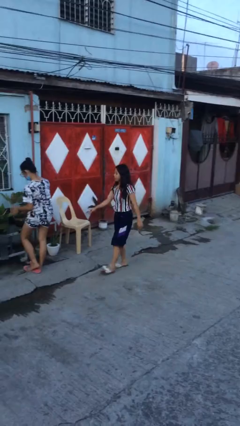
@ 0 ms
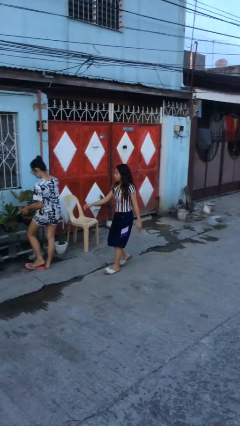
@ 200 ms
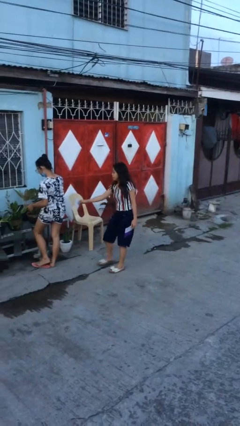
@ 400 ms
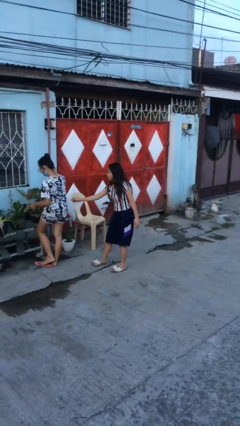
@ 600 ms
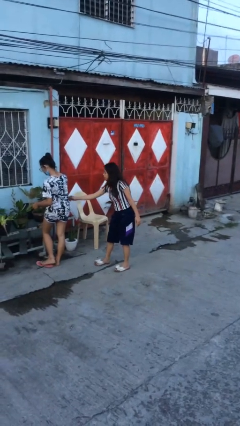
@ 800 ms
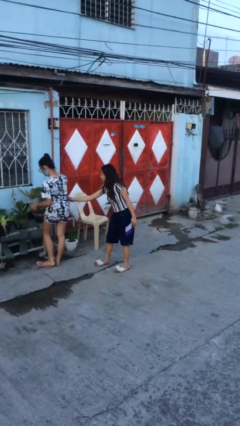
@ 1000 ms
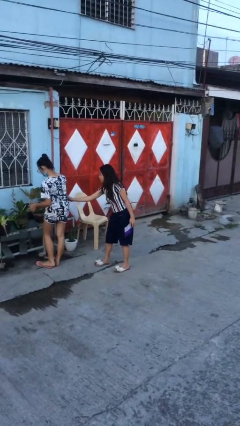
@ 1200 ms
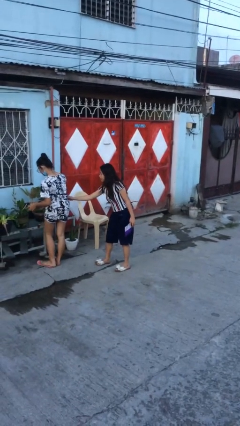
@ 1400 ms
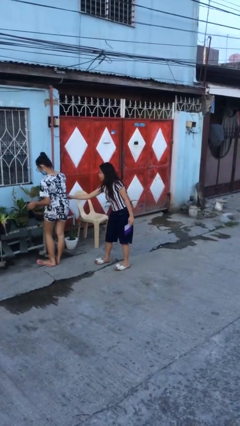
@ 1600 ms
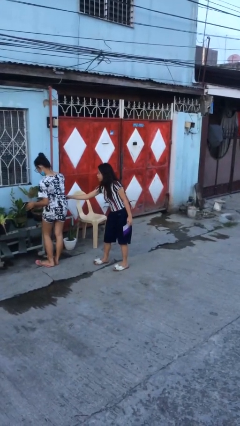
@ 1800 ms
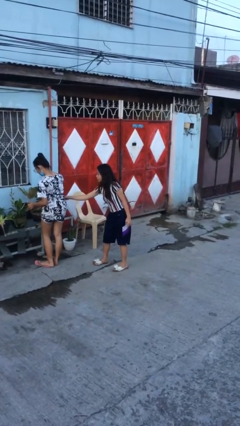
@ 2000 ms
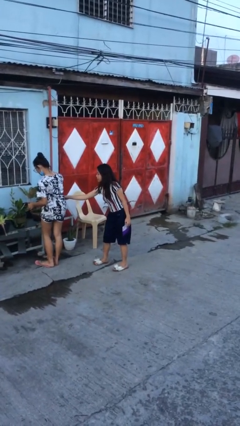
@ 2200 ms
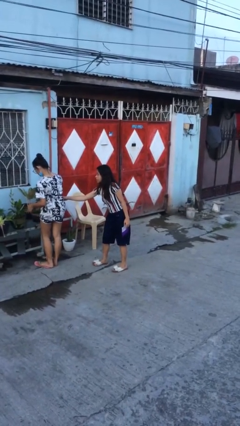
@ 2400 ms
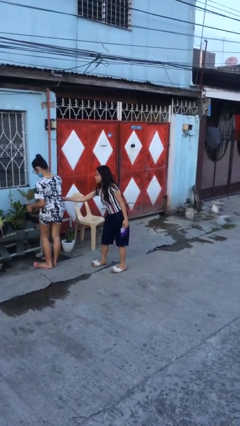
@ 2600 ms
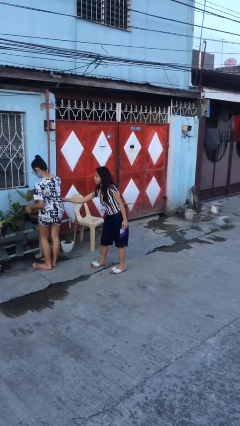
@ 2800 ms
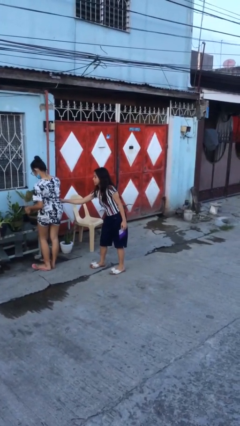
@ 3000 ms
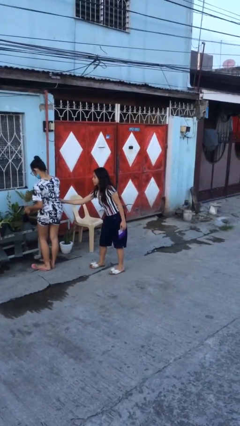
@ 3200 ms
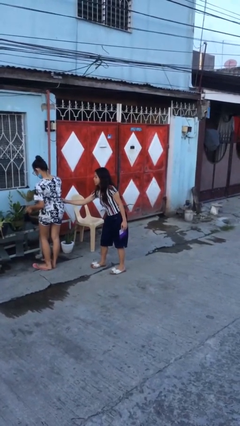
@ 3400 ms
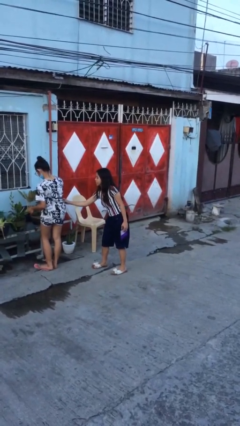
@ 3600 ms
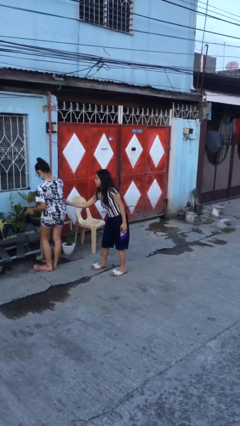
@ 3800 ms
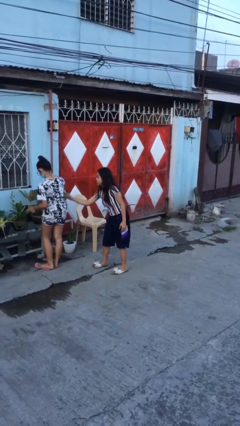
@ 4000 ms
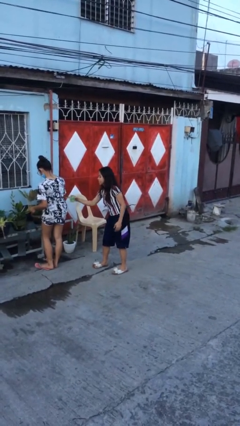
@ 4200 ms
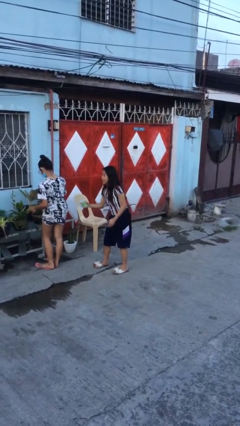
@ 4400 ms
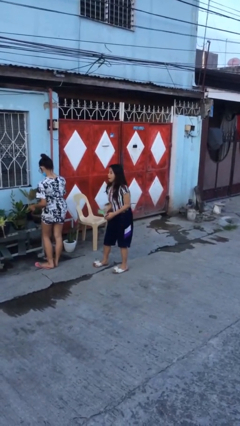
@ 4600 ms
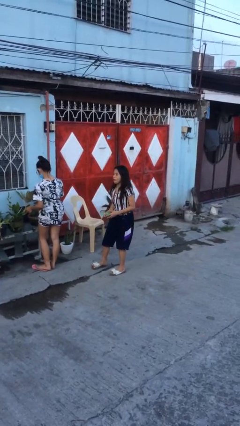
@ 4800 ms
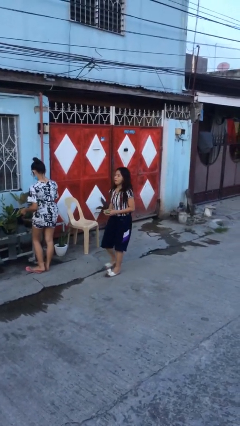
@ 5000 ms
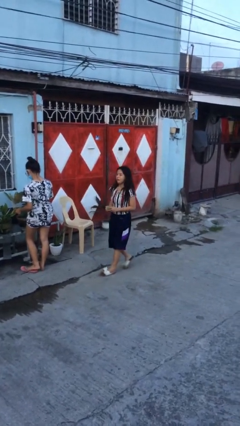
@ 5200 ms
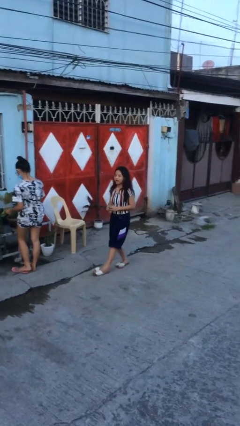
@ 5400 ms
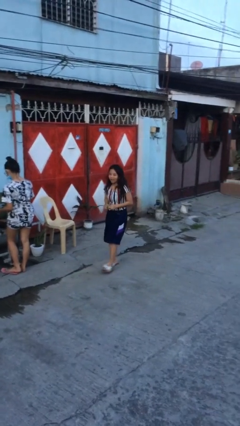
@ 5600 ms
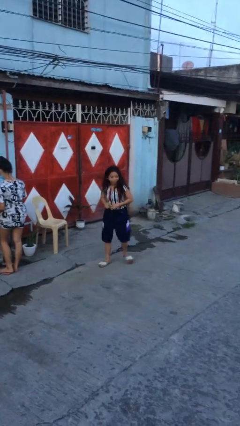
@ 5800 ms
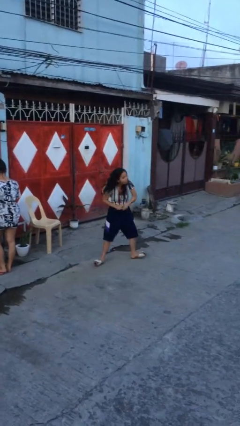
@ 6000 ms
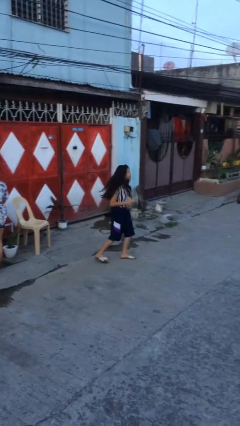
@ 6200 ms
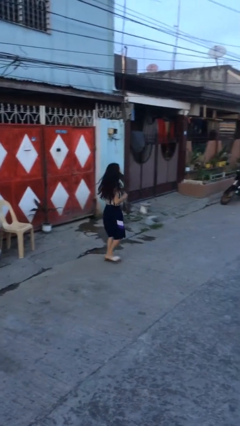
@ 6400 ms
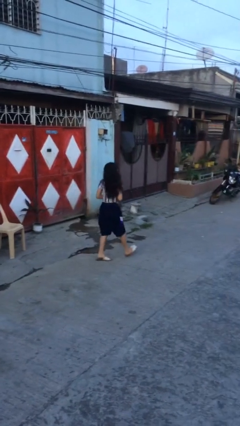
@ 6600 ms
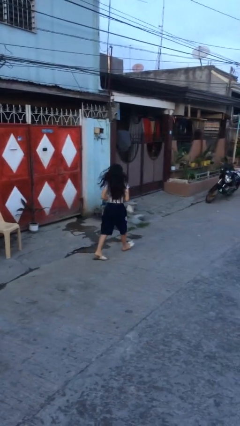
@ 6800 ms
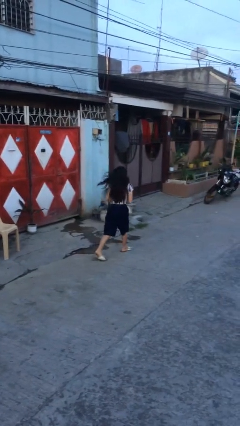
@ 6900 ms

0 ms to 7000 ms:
person steals object from person

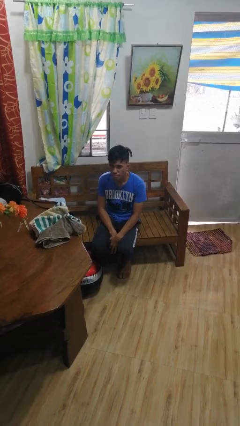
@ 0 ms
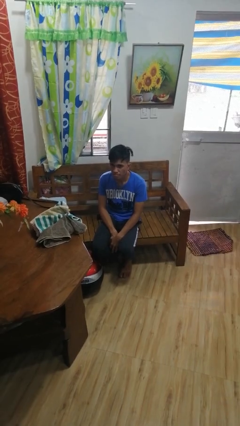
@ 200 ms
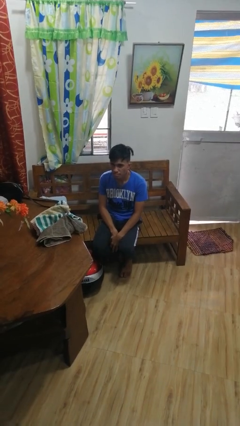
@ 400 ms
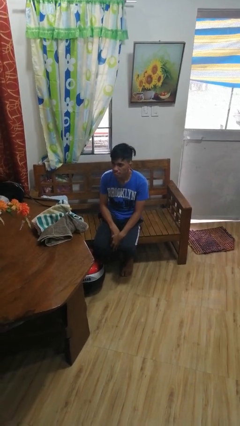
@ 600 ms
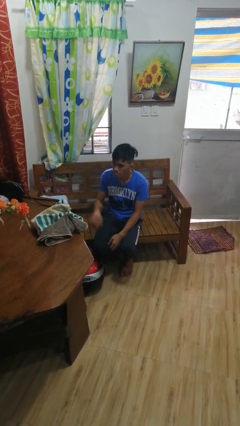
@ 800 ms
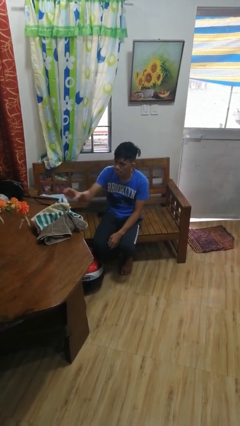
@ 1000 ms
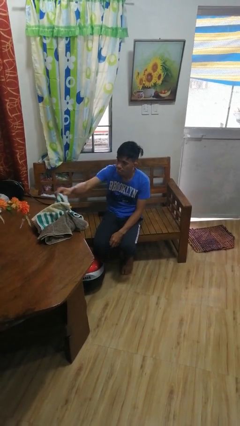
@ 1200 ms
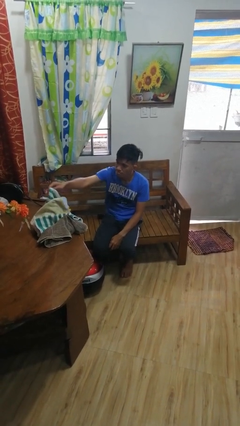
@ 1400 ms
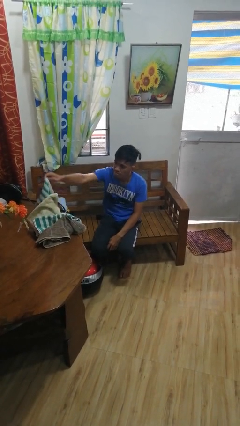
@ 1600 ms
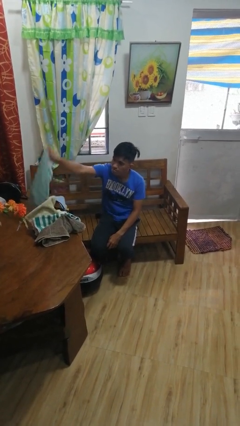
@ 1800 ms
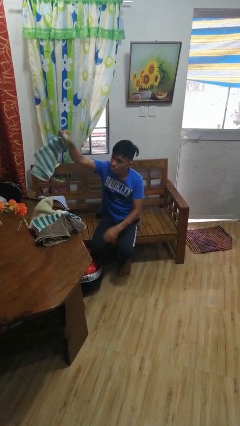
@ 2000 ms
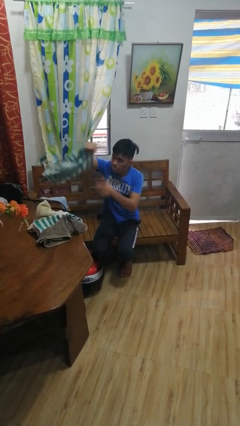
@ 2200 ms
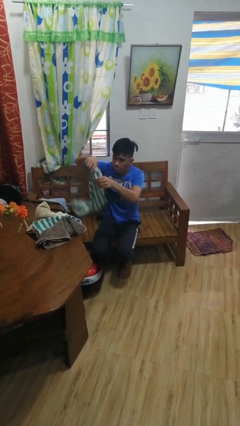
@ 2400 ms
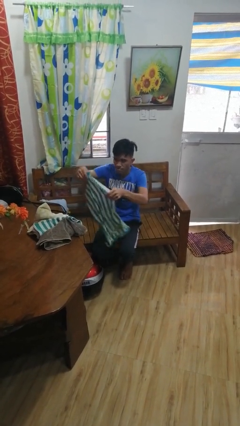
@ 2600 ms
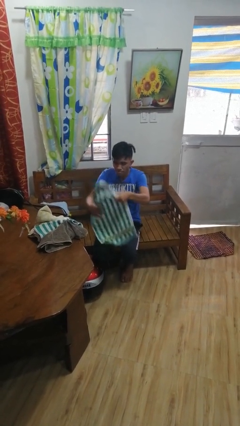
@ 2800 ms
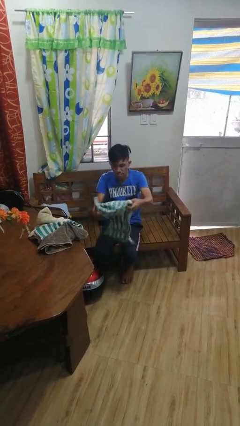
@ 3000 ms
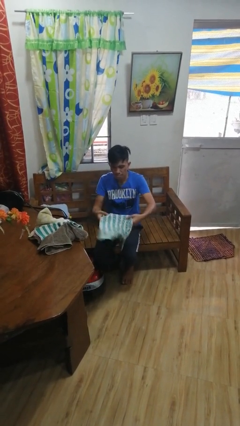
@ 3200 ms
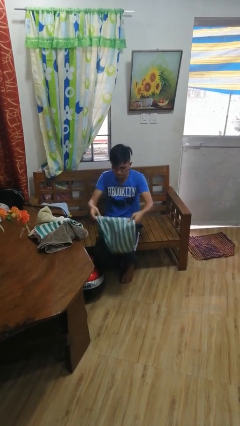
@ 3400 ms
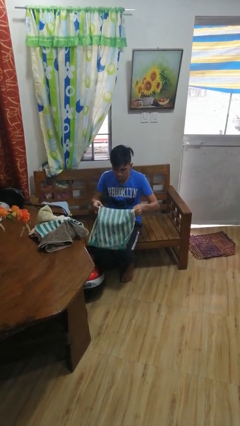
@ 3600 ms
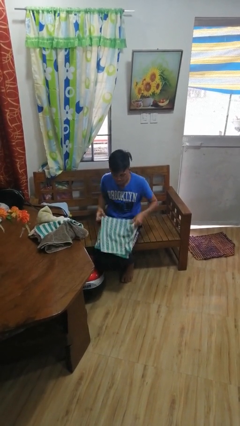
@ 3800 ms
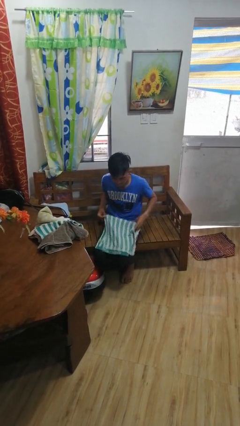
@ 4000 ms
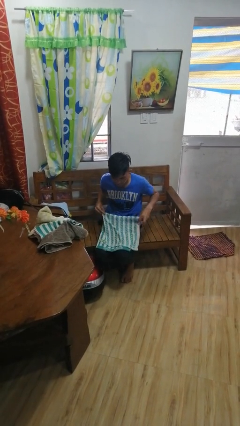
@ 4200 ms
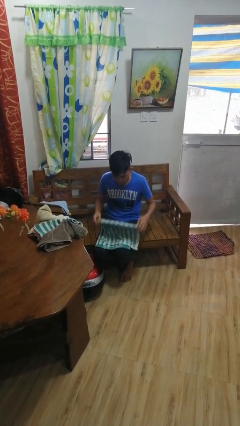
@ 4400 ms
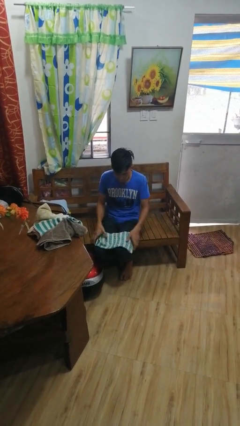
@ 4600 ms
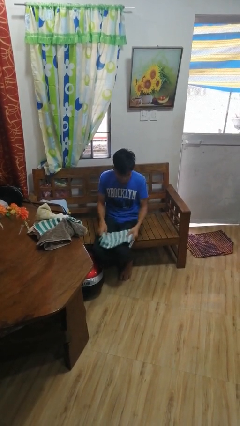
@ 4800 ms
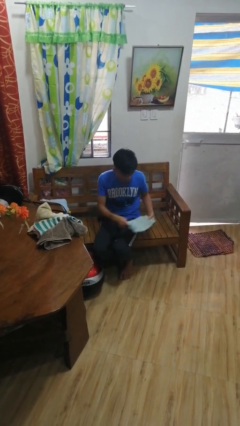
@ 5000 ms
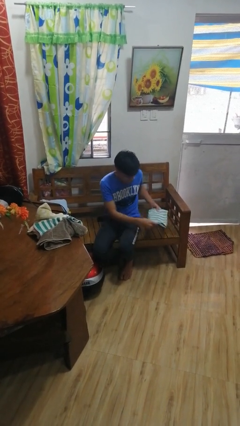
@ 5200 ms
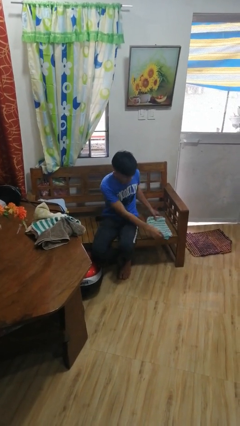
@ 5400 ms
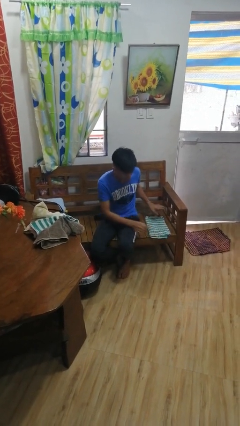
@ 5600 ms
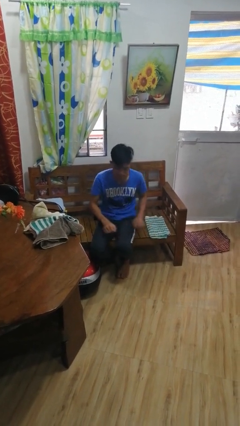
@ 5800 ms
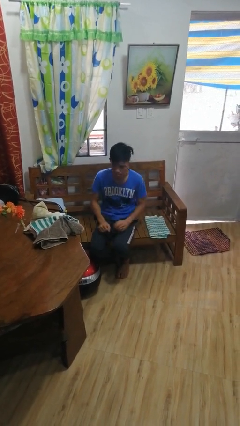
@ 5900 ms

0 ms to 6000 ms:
person folds towel

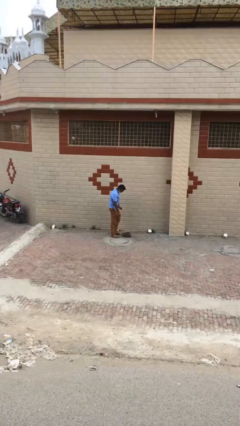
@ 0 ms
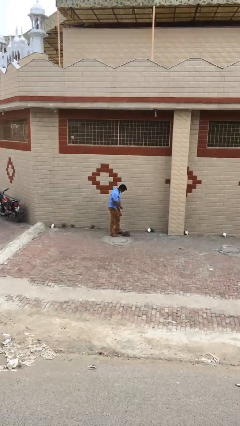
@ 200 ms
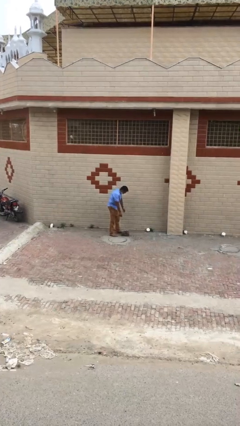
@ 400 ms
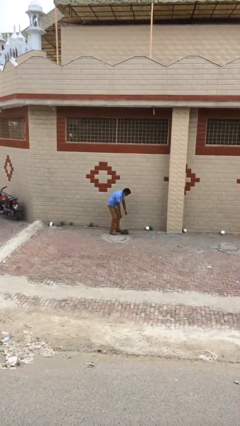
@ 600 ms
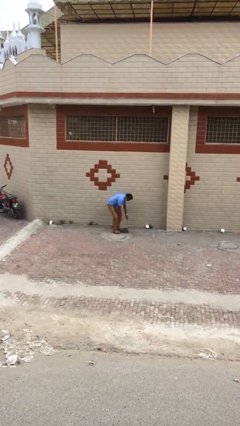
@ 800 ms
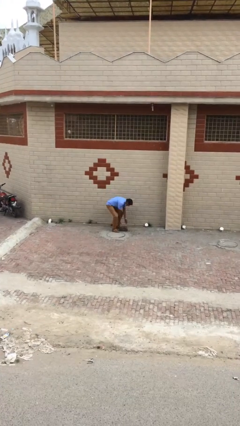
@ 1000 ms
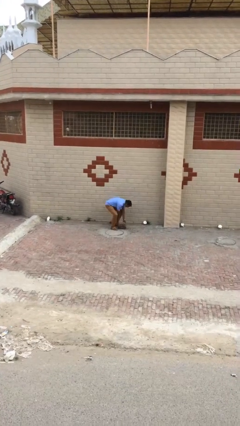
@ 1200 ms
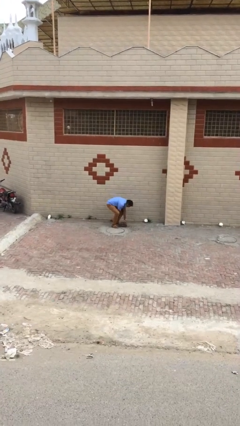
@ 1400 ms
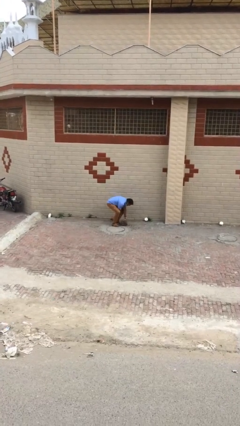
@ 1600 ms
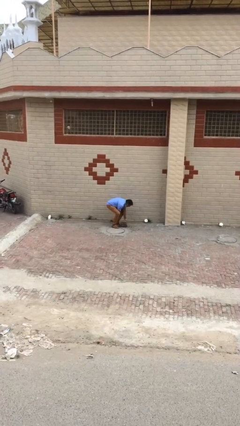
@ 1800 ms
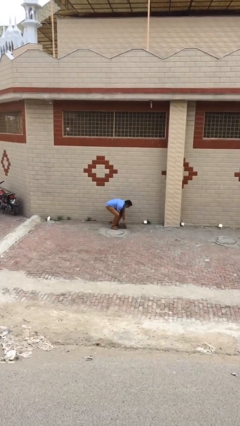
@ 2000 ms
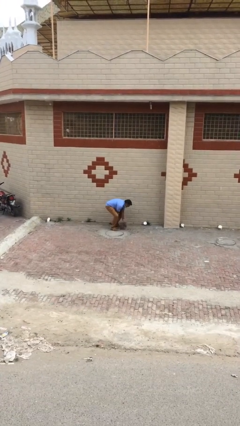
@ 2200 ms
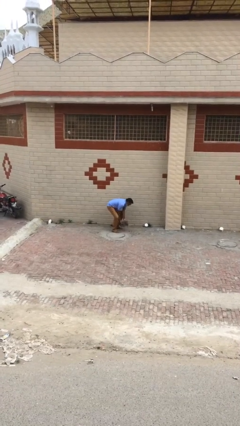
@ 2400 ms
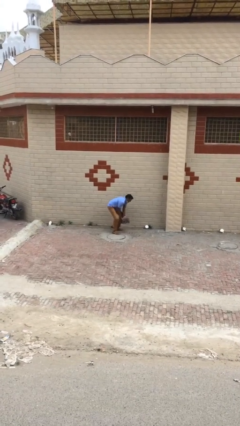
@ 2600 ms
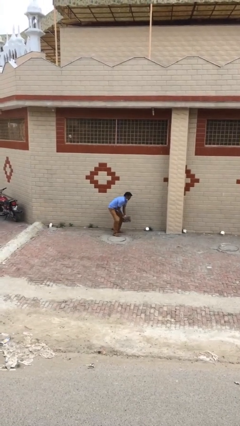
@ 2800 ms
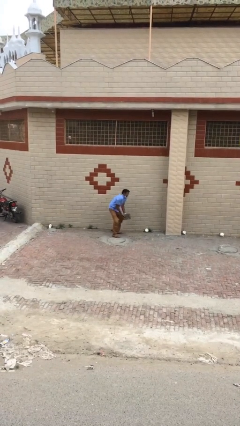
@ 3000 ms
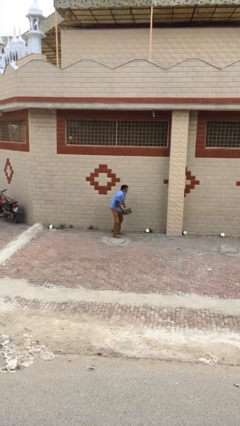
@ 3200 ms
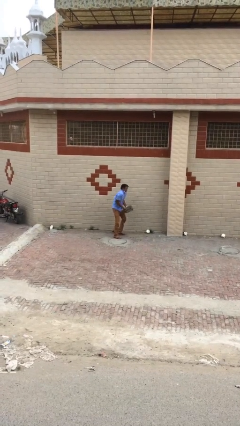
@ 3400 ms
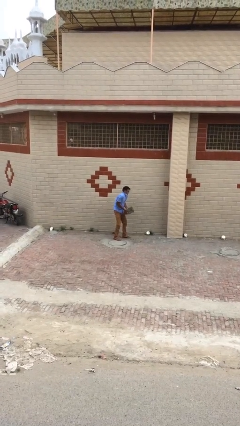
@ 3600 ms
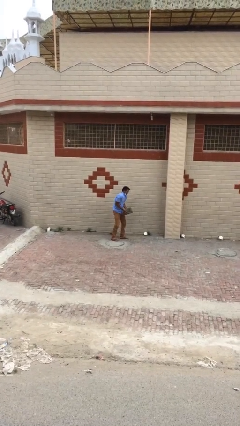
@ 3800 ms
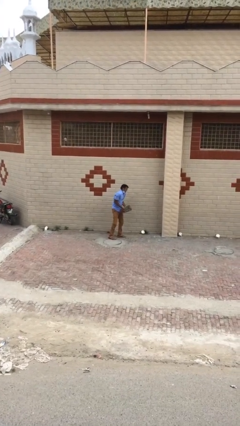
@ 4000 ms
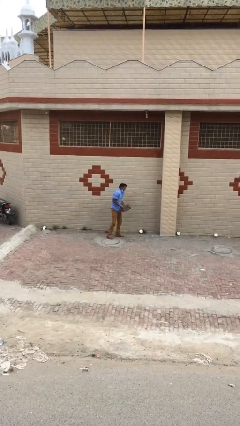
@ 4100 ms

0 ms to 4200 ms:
person picks up object from floor

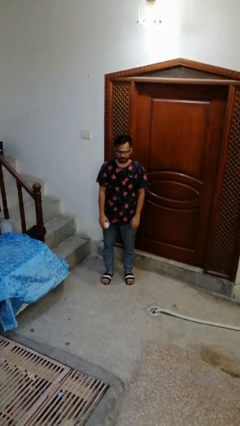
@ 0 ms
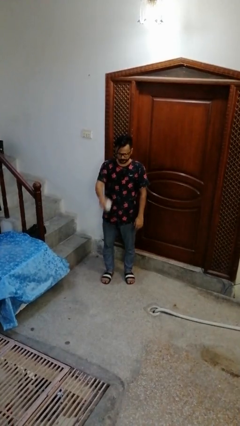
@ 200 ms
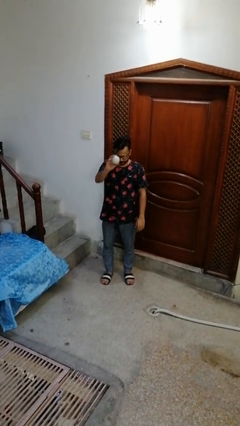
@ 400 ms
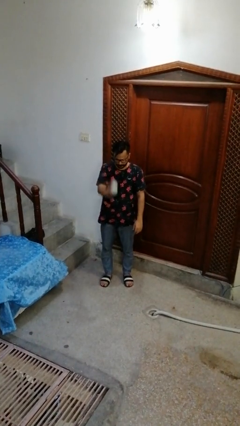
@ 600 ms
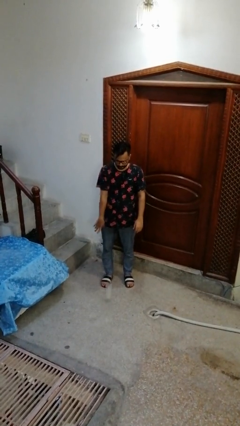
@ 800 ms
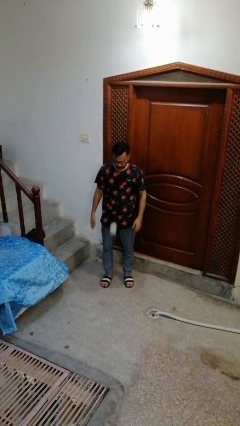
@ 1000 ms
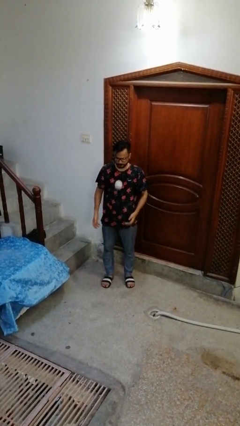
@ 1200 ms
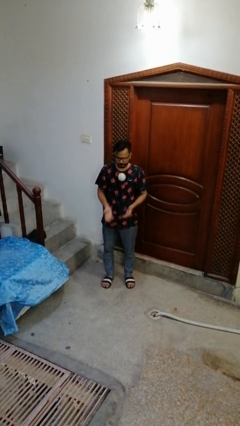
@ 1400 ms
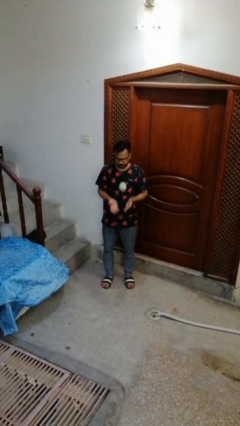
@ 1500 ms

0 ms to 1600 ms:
person bounces ball on floor
